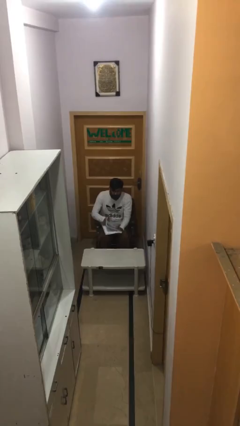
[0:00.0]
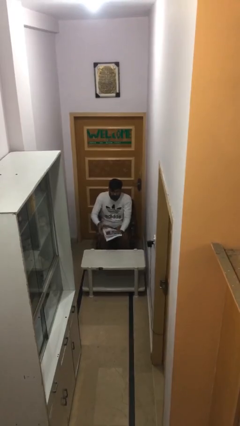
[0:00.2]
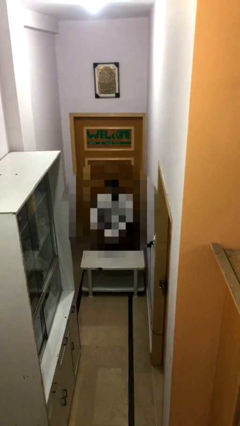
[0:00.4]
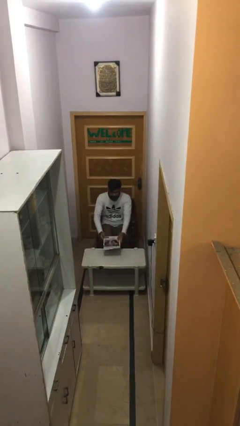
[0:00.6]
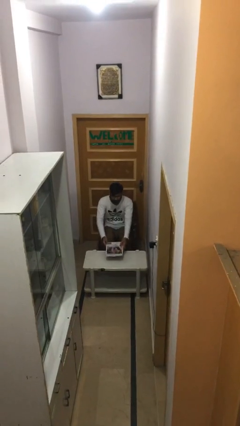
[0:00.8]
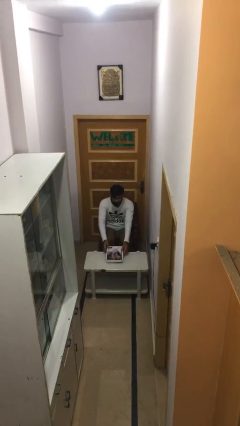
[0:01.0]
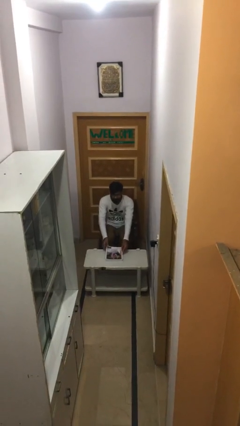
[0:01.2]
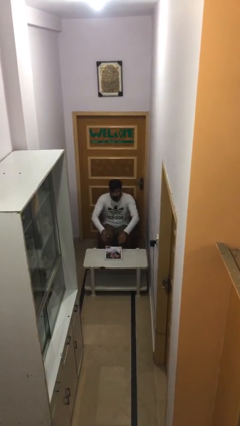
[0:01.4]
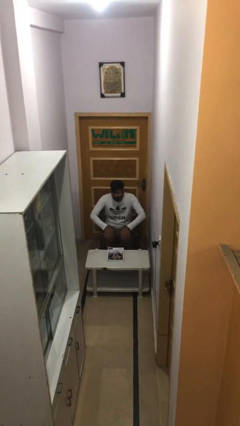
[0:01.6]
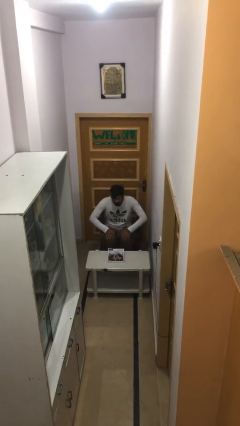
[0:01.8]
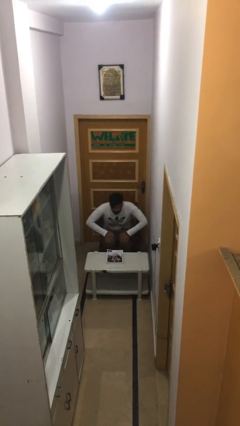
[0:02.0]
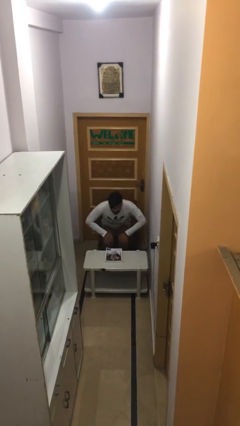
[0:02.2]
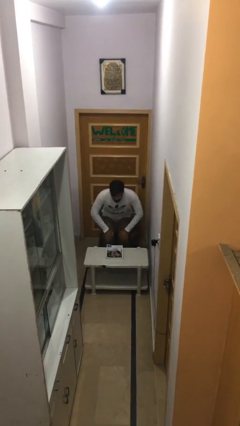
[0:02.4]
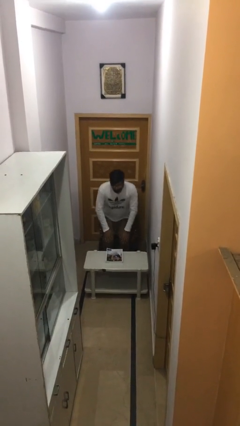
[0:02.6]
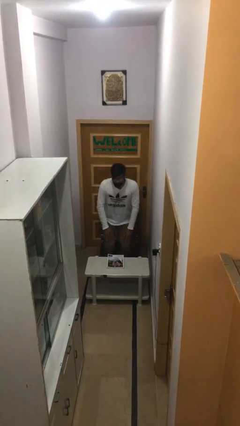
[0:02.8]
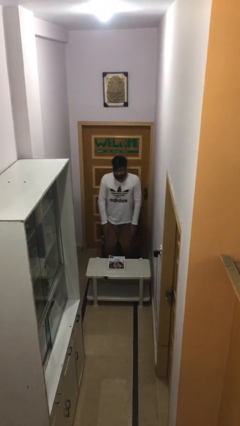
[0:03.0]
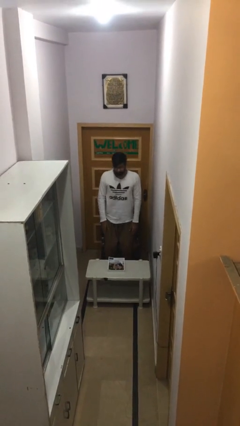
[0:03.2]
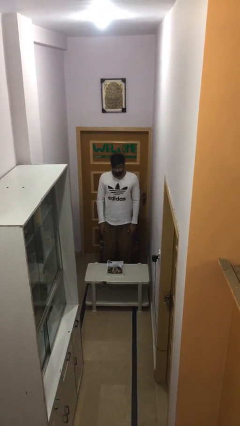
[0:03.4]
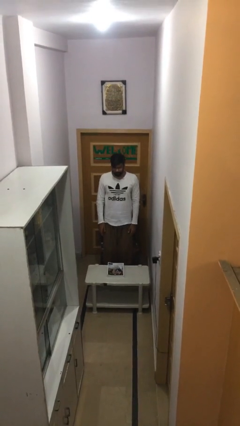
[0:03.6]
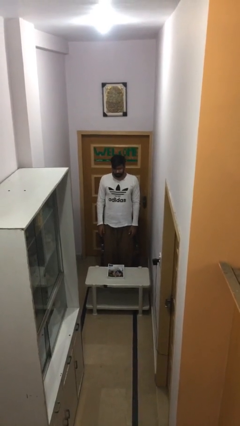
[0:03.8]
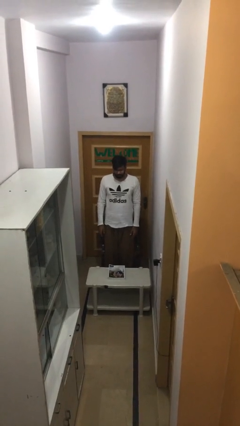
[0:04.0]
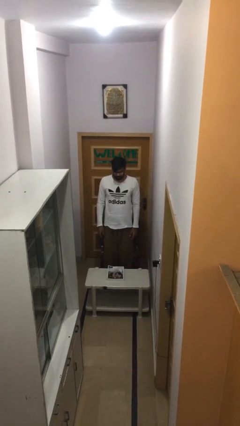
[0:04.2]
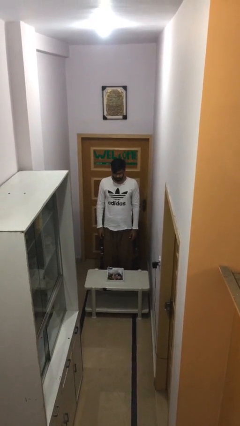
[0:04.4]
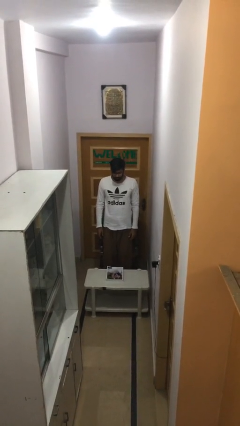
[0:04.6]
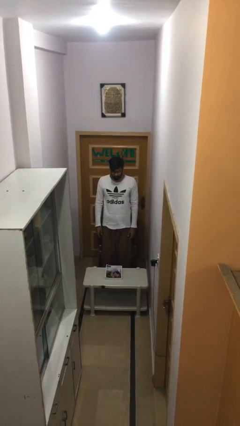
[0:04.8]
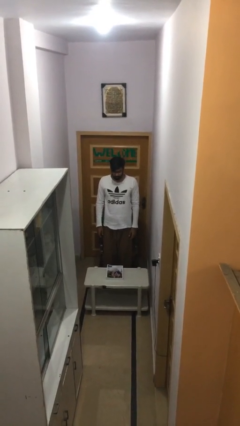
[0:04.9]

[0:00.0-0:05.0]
person stands up

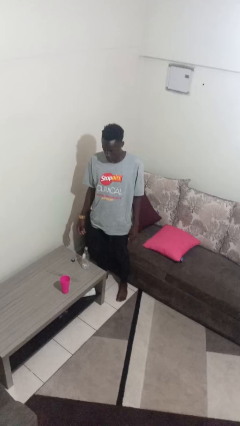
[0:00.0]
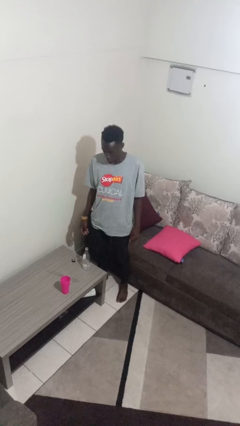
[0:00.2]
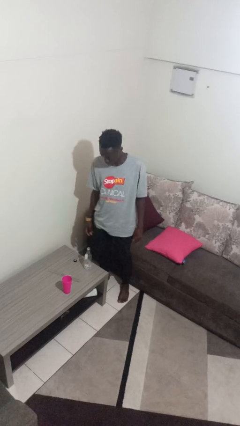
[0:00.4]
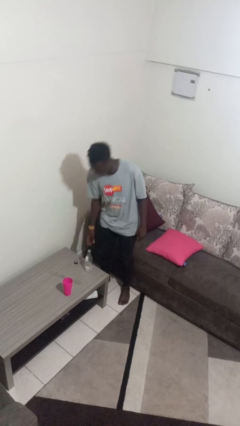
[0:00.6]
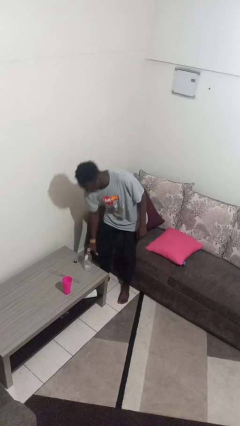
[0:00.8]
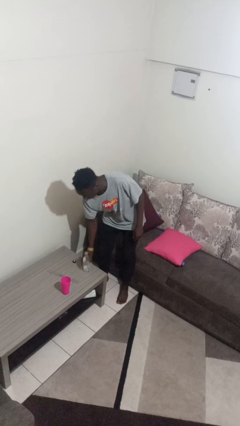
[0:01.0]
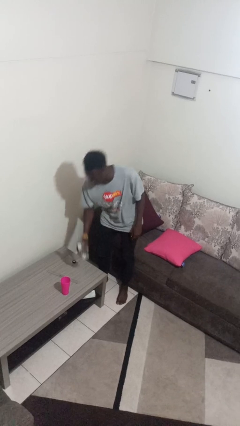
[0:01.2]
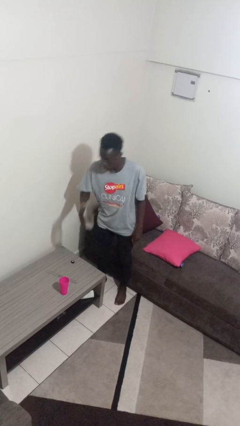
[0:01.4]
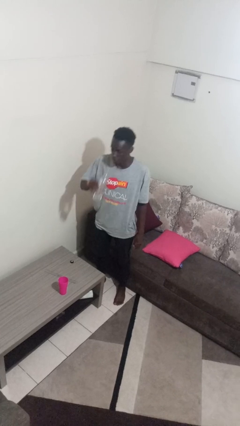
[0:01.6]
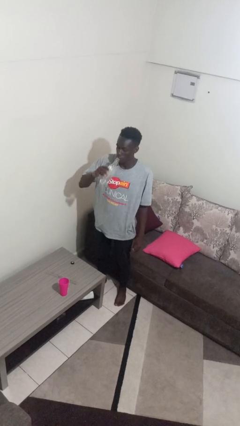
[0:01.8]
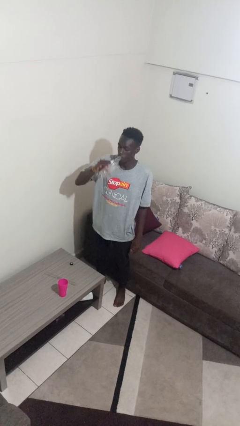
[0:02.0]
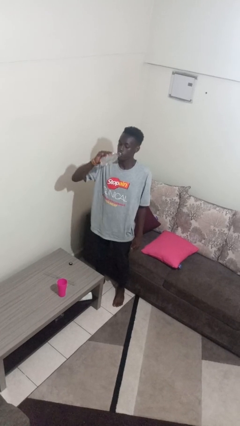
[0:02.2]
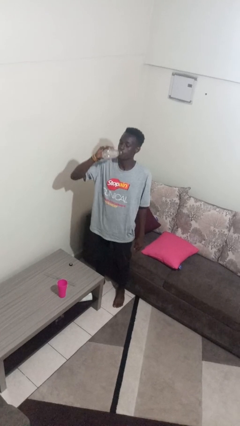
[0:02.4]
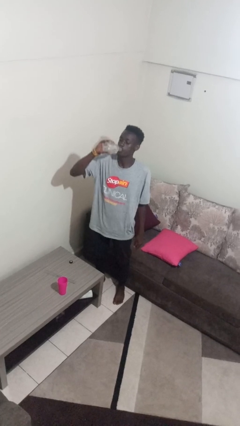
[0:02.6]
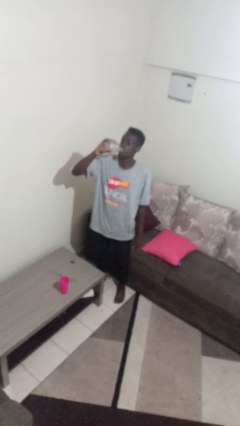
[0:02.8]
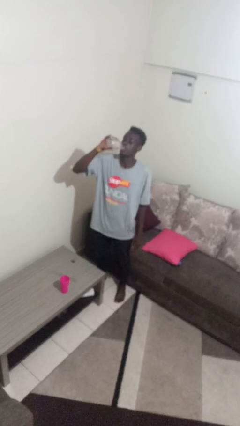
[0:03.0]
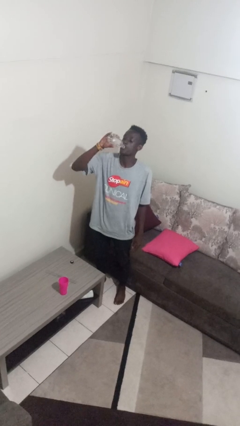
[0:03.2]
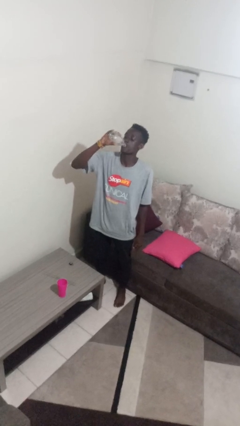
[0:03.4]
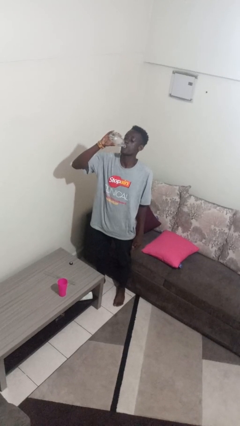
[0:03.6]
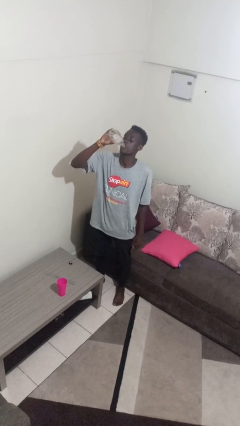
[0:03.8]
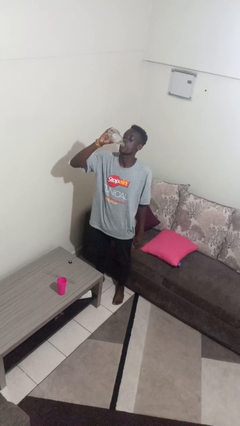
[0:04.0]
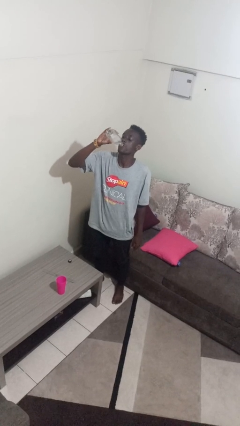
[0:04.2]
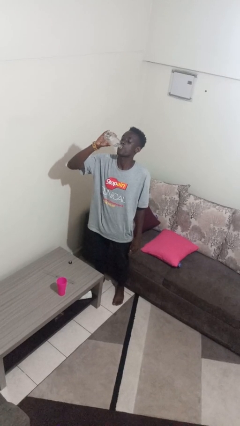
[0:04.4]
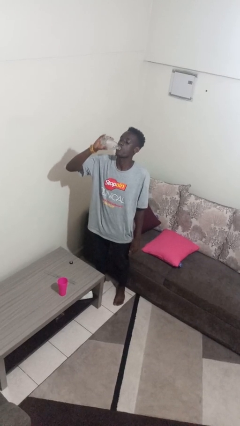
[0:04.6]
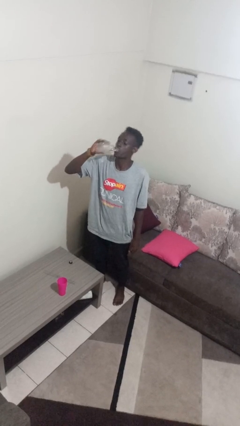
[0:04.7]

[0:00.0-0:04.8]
person drinks from bottle

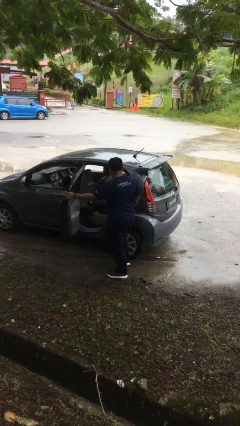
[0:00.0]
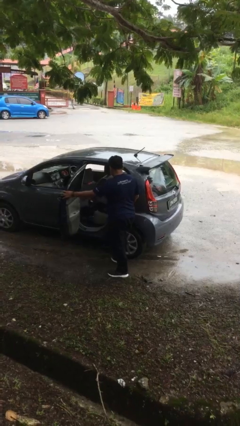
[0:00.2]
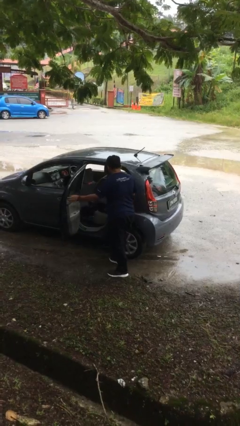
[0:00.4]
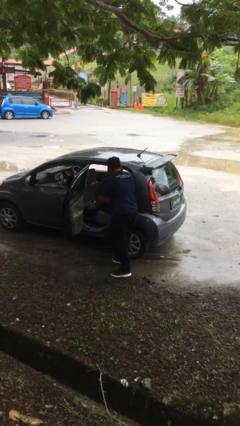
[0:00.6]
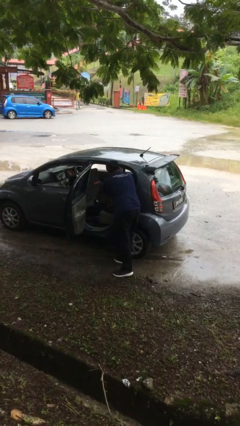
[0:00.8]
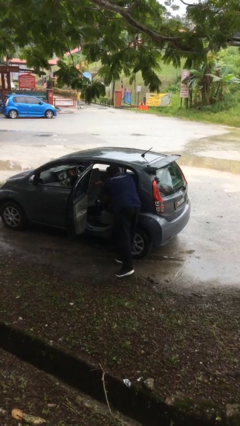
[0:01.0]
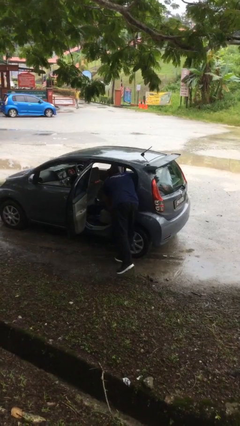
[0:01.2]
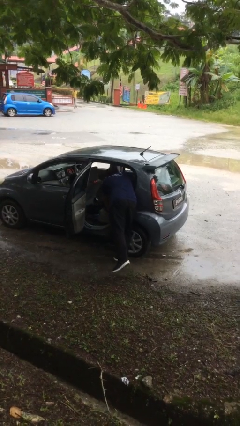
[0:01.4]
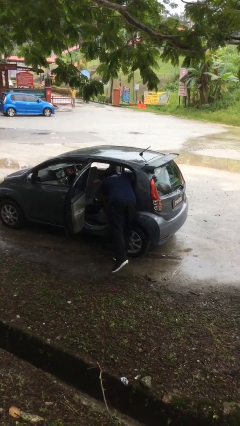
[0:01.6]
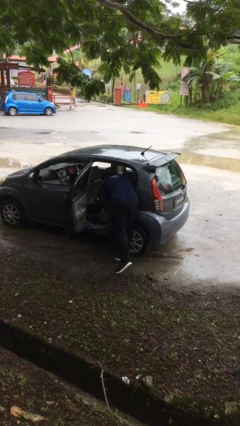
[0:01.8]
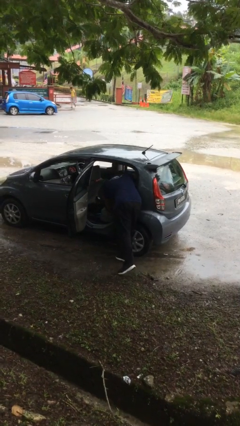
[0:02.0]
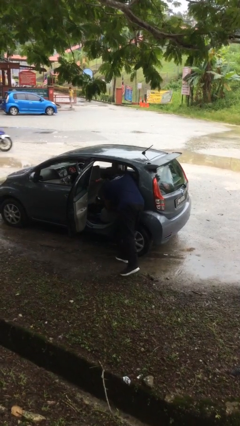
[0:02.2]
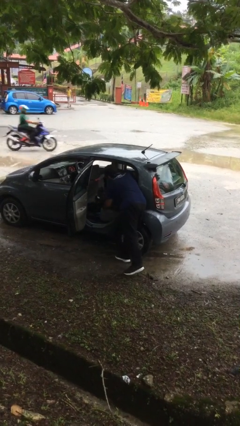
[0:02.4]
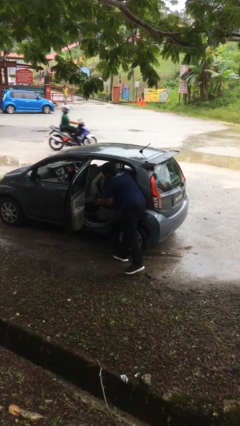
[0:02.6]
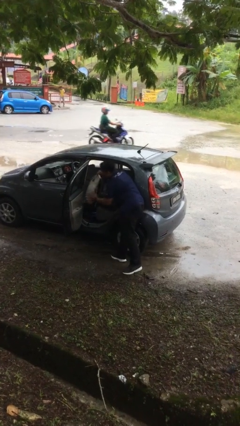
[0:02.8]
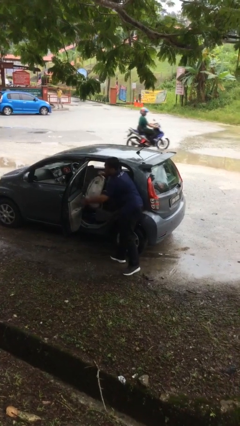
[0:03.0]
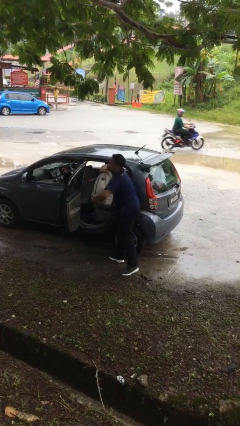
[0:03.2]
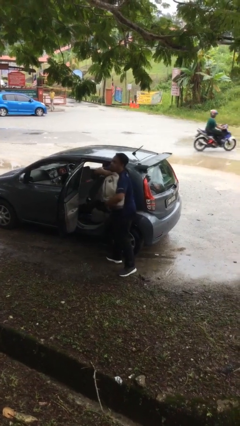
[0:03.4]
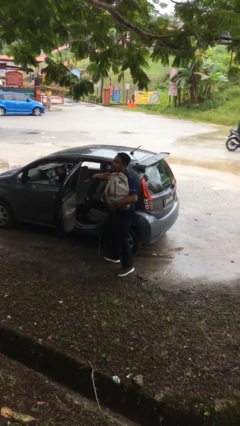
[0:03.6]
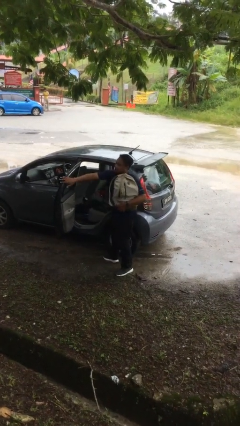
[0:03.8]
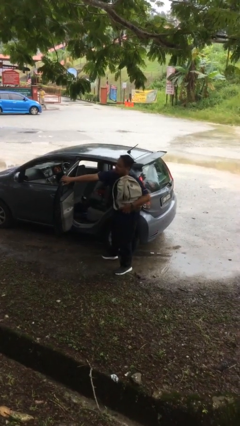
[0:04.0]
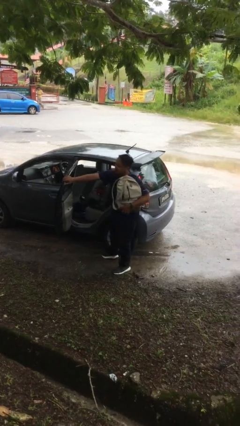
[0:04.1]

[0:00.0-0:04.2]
person unloads car

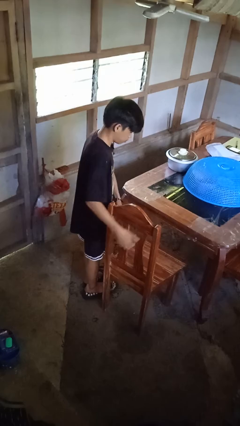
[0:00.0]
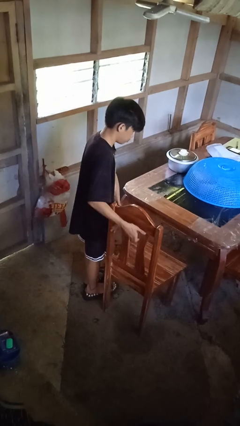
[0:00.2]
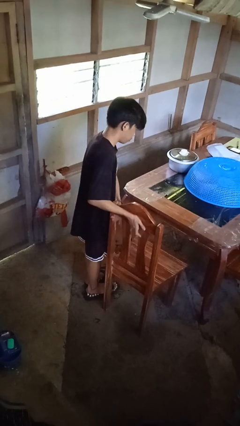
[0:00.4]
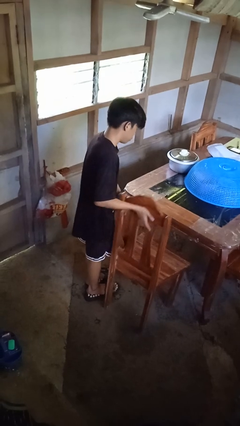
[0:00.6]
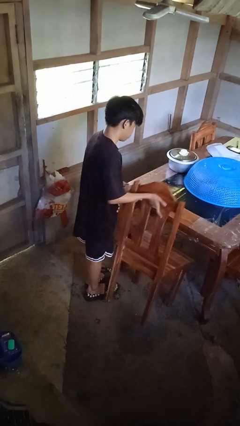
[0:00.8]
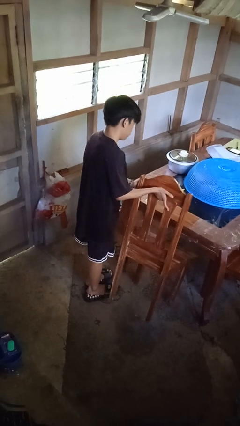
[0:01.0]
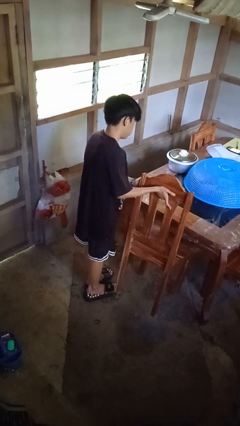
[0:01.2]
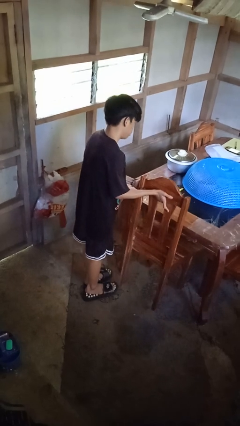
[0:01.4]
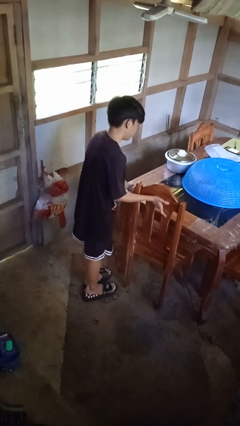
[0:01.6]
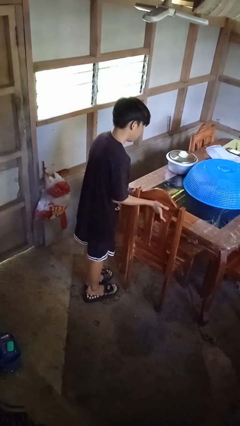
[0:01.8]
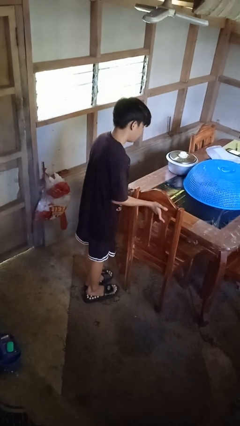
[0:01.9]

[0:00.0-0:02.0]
person pushes in chair

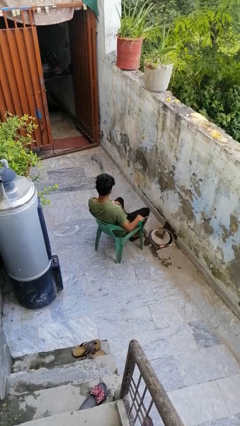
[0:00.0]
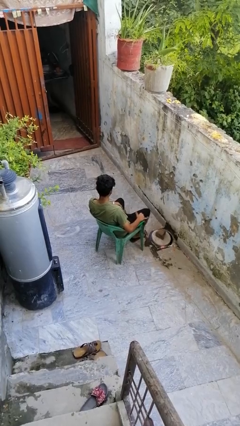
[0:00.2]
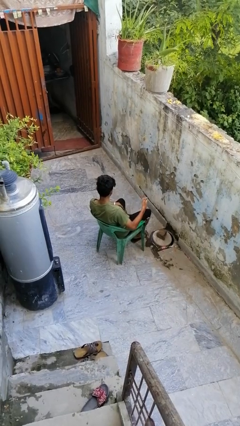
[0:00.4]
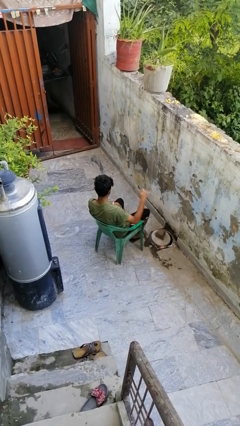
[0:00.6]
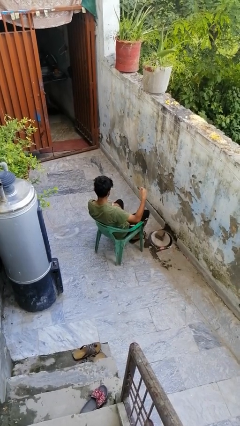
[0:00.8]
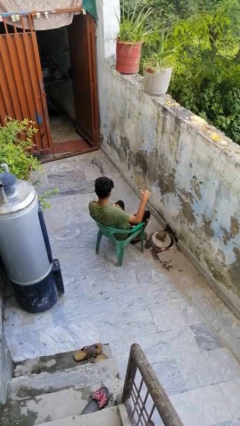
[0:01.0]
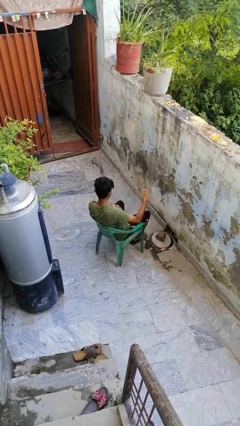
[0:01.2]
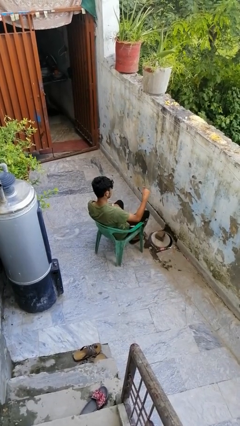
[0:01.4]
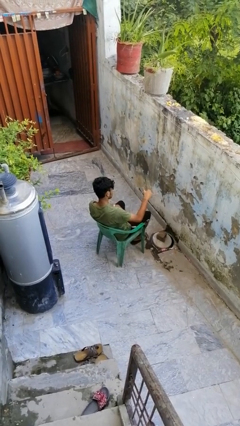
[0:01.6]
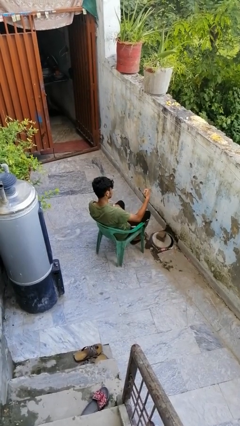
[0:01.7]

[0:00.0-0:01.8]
person gestures hang loose

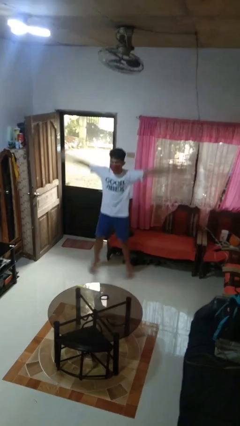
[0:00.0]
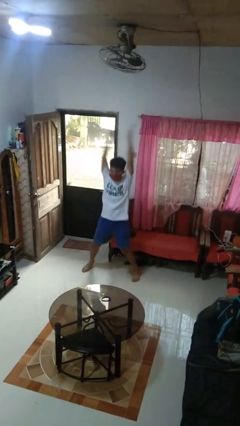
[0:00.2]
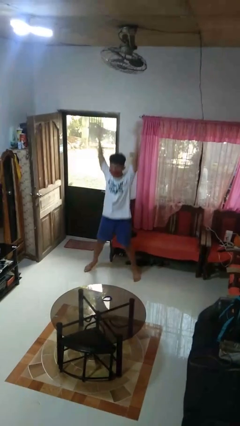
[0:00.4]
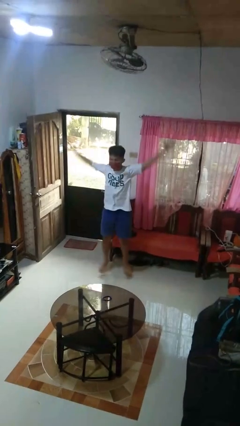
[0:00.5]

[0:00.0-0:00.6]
person exercises with jumping jacks
